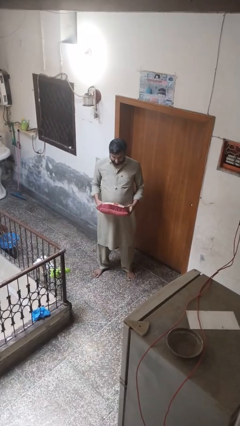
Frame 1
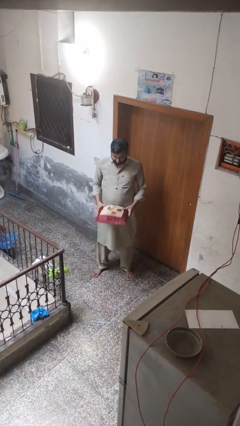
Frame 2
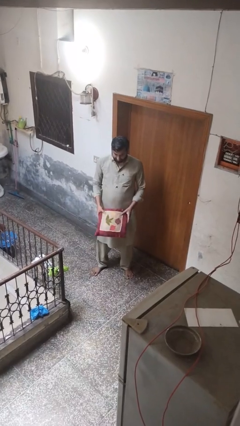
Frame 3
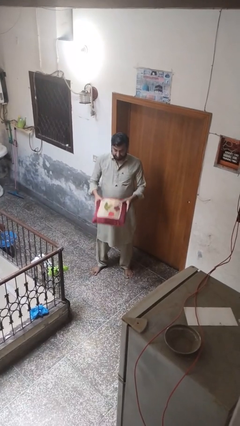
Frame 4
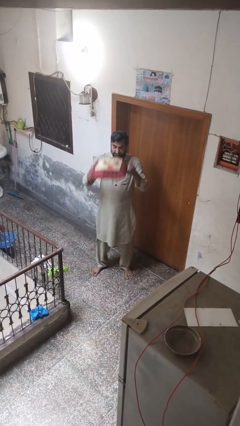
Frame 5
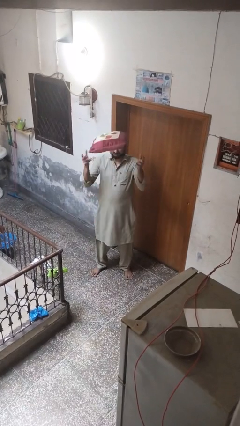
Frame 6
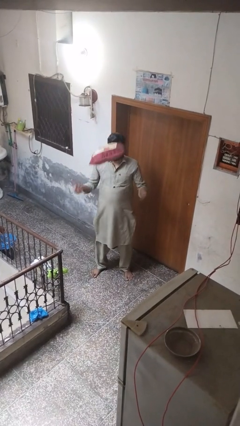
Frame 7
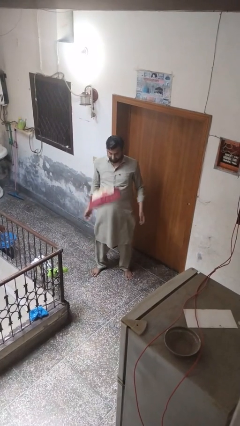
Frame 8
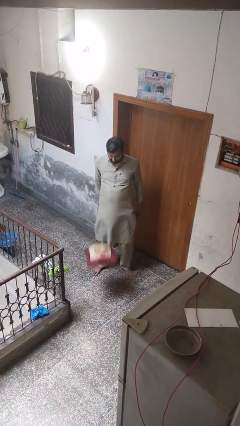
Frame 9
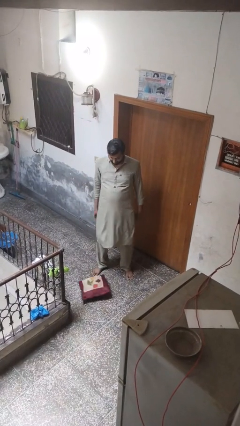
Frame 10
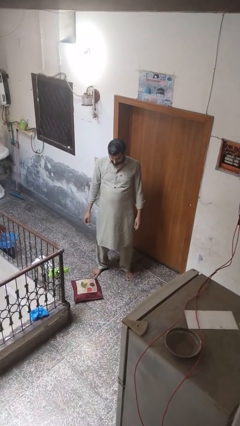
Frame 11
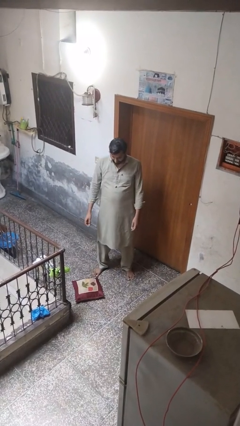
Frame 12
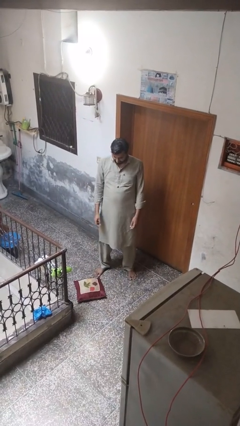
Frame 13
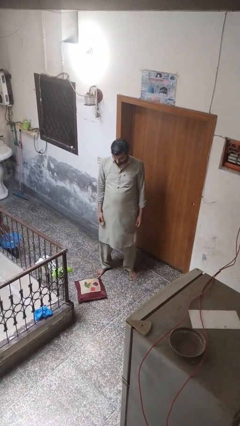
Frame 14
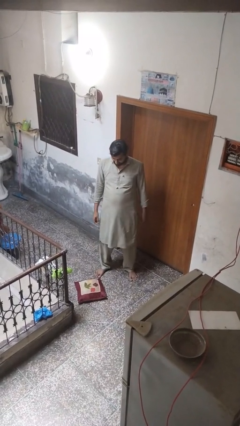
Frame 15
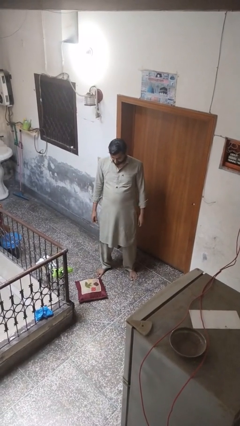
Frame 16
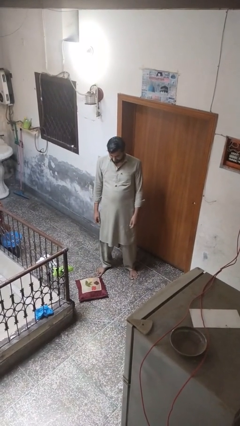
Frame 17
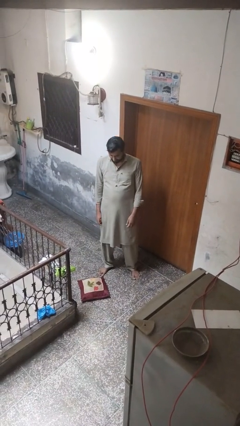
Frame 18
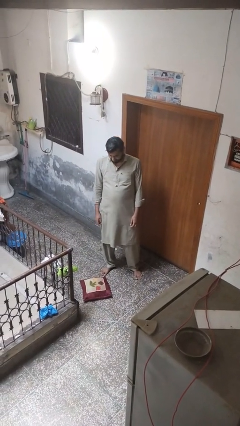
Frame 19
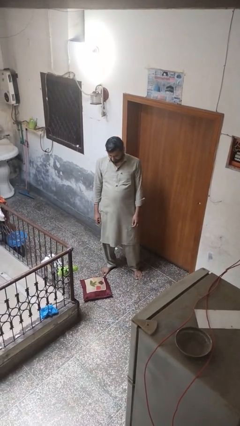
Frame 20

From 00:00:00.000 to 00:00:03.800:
person throws object into air

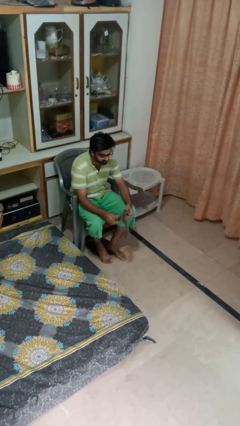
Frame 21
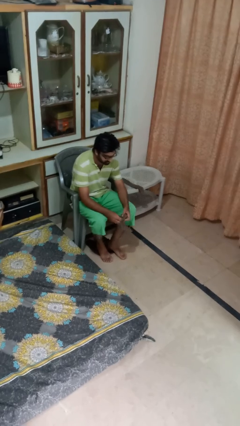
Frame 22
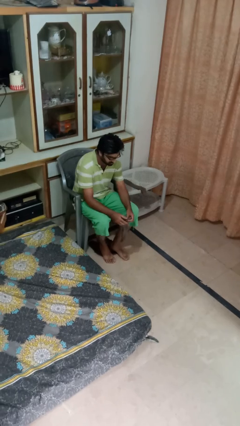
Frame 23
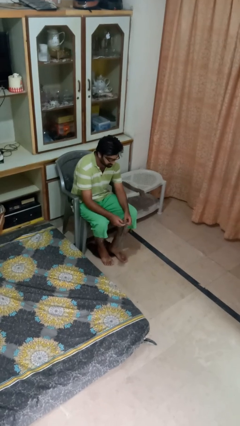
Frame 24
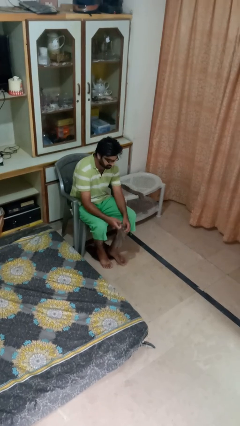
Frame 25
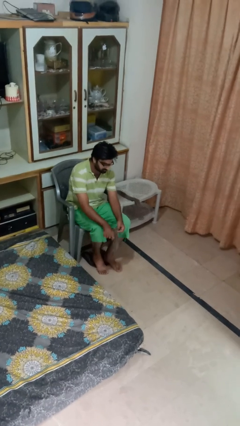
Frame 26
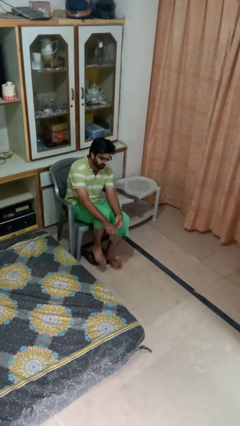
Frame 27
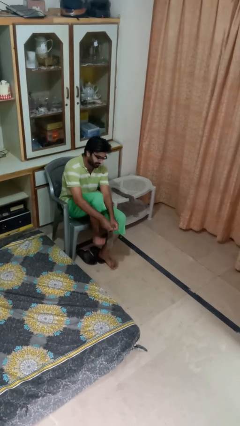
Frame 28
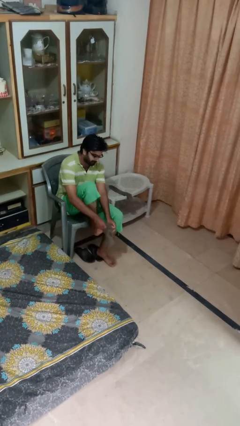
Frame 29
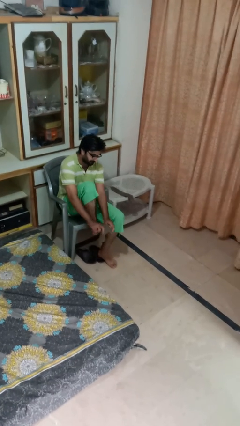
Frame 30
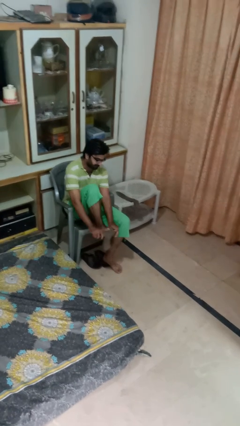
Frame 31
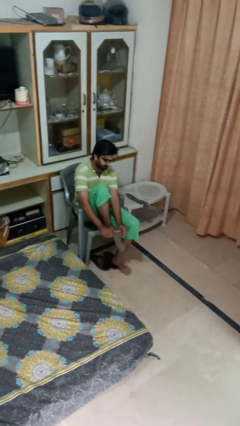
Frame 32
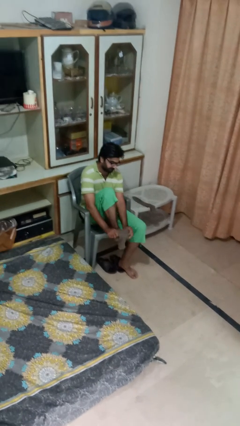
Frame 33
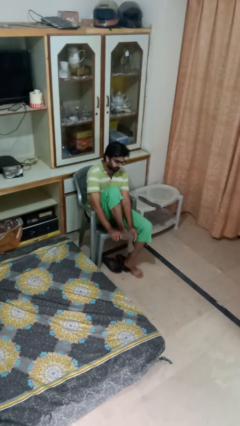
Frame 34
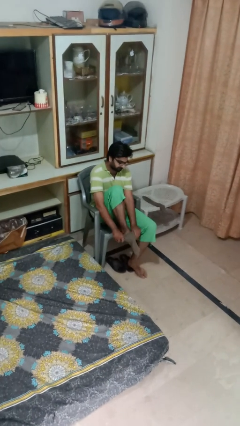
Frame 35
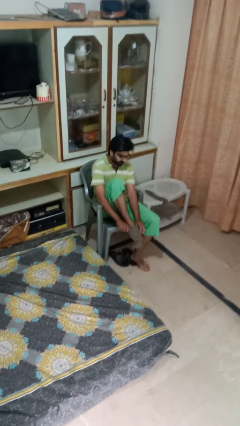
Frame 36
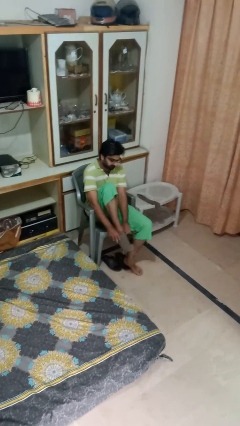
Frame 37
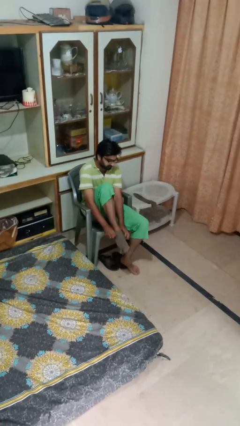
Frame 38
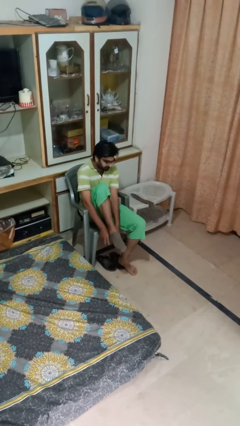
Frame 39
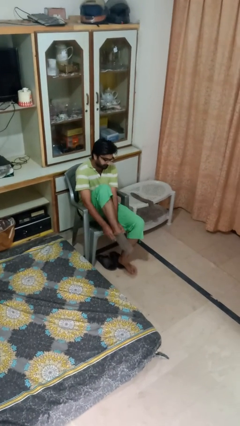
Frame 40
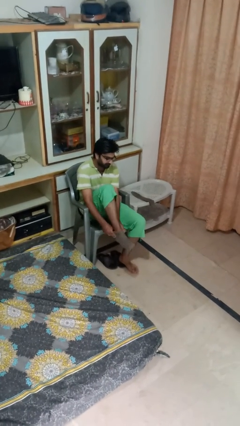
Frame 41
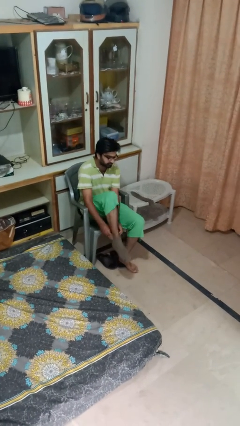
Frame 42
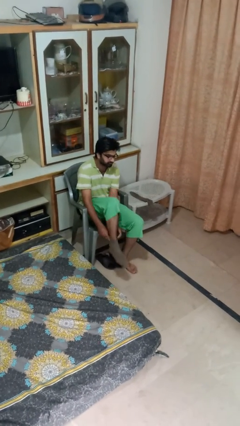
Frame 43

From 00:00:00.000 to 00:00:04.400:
person puts on socks

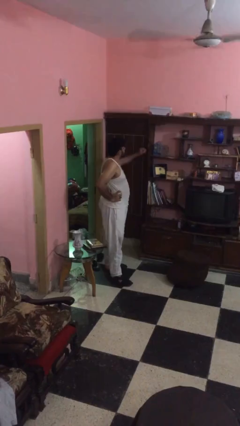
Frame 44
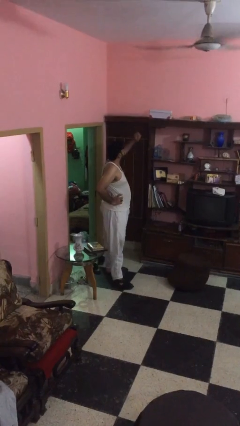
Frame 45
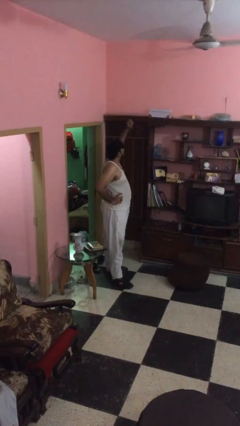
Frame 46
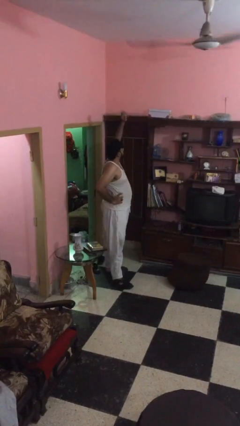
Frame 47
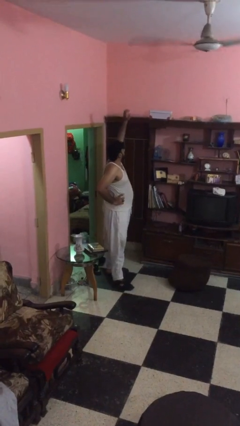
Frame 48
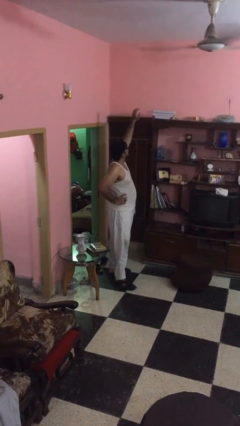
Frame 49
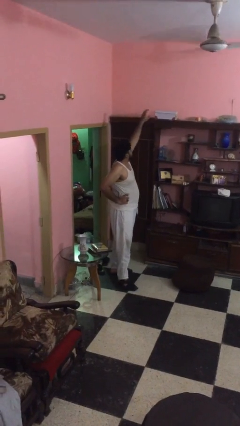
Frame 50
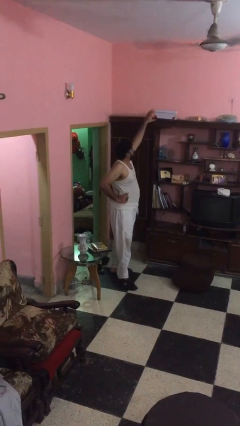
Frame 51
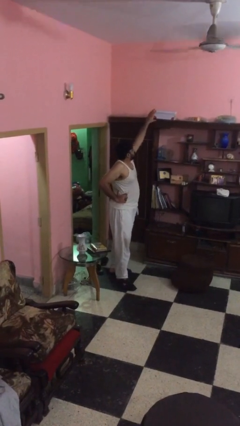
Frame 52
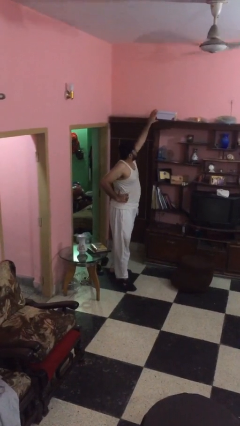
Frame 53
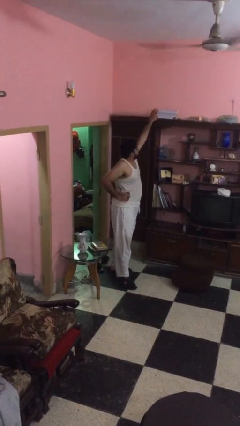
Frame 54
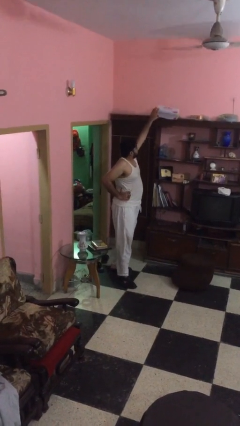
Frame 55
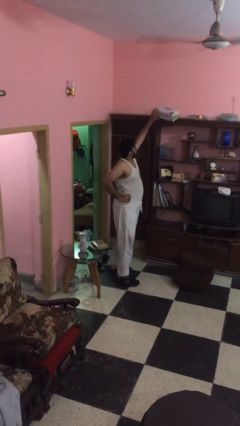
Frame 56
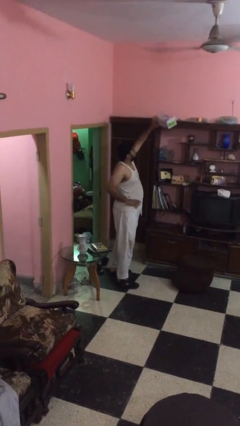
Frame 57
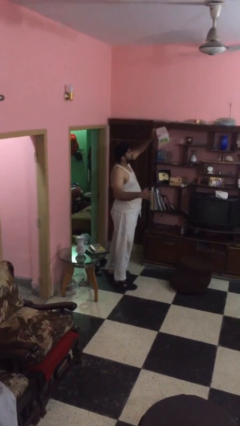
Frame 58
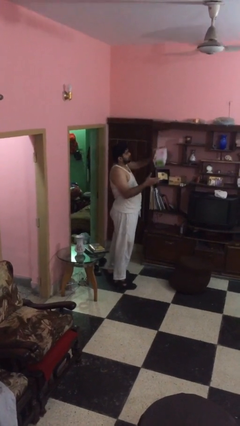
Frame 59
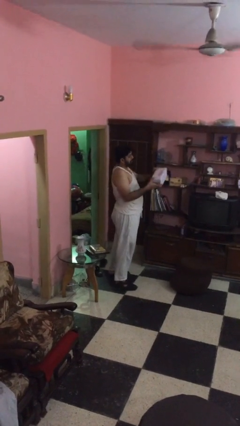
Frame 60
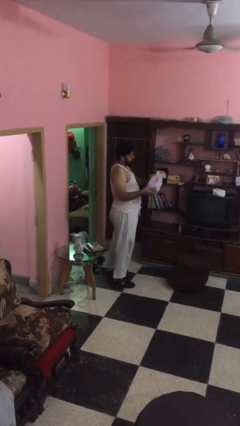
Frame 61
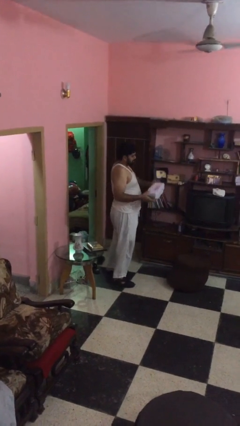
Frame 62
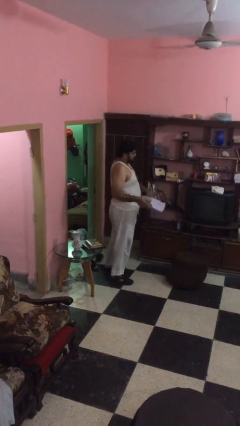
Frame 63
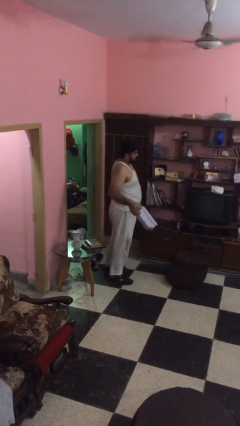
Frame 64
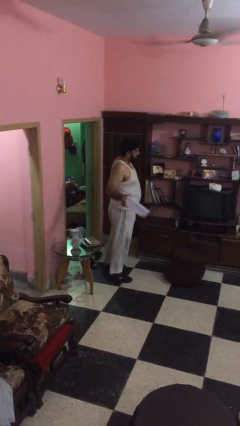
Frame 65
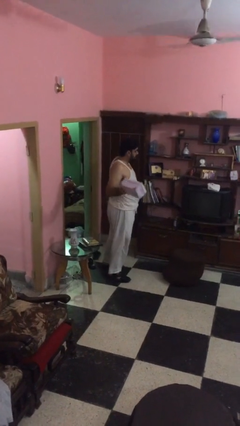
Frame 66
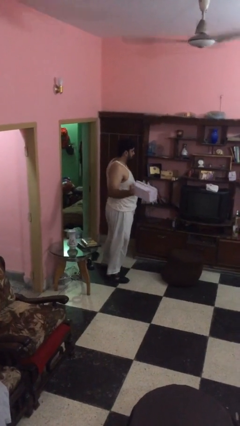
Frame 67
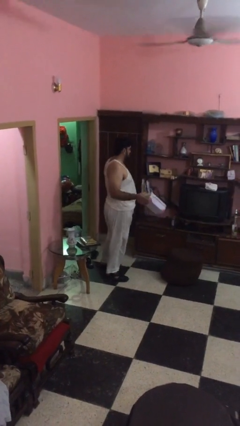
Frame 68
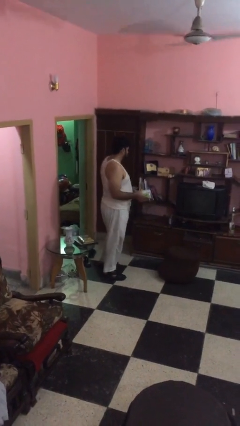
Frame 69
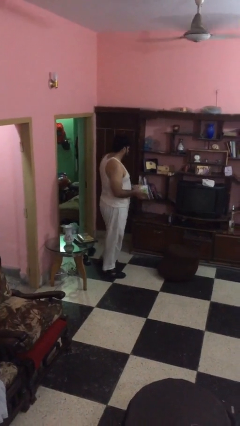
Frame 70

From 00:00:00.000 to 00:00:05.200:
person picks up object from shelf

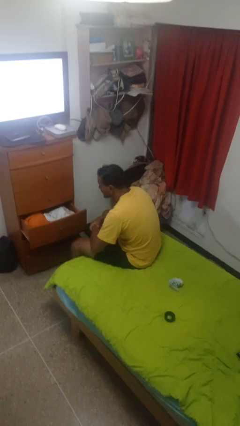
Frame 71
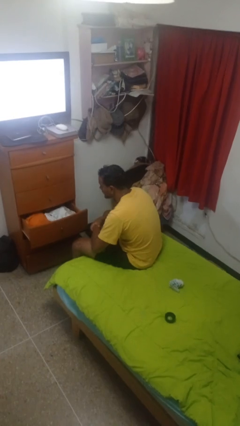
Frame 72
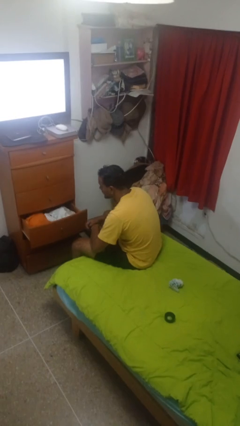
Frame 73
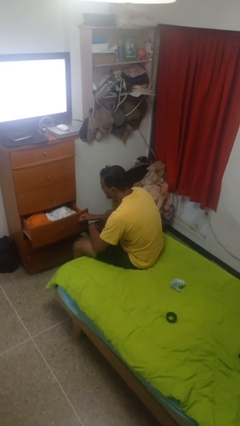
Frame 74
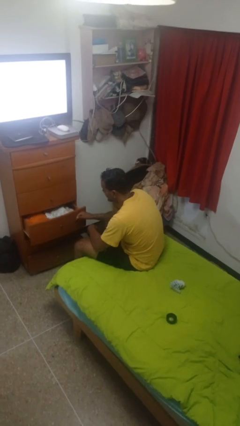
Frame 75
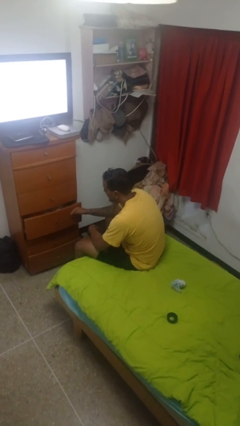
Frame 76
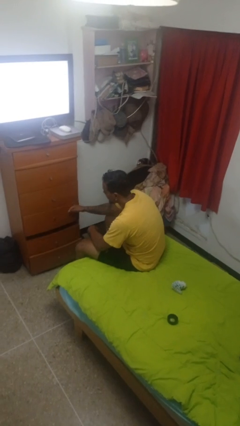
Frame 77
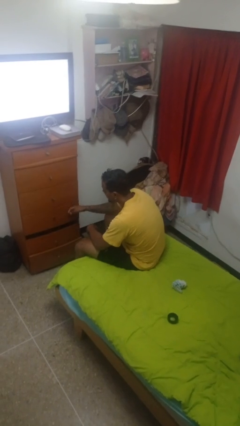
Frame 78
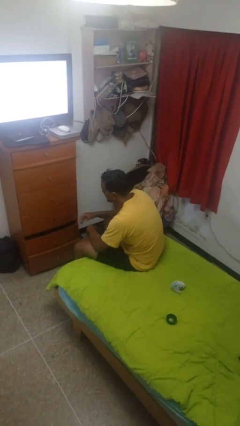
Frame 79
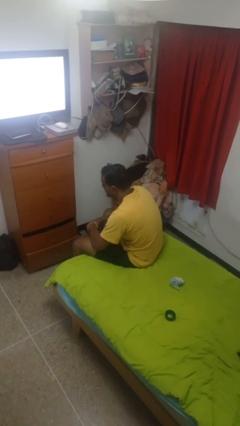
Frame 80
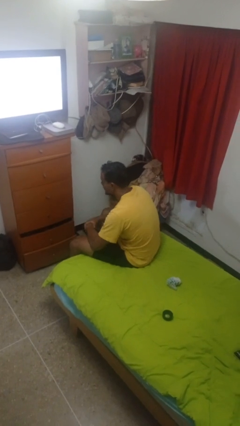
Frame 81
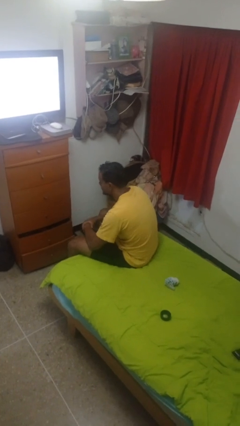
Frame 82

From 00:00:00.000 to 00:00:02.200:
person closes dresser drawer

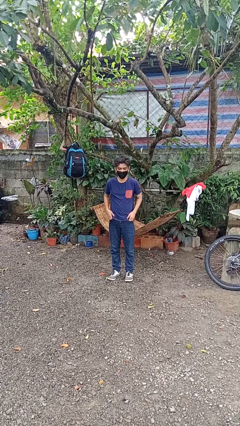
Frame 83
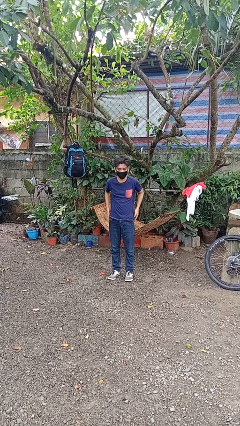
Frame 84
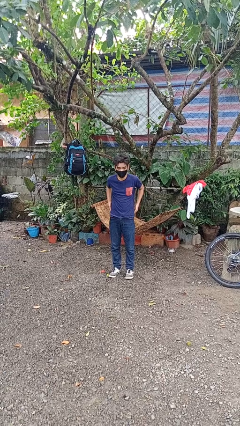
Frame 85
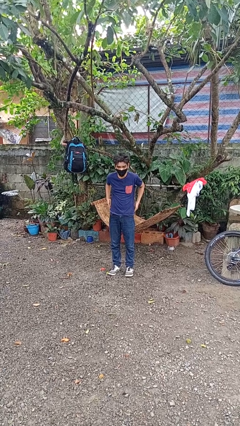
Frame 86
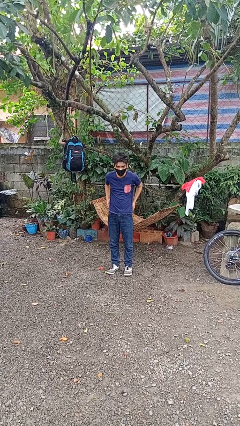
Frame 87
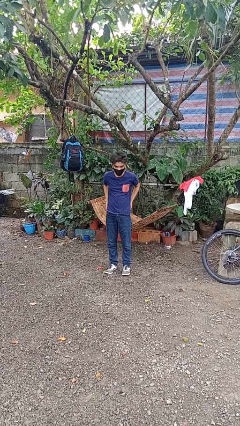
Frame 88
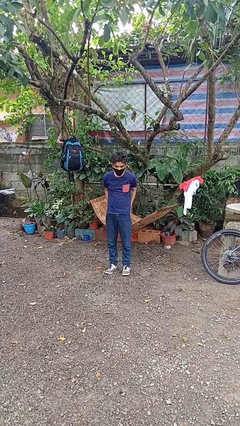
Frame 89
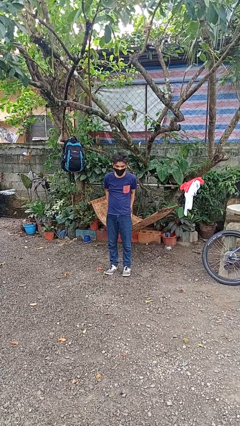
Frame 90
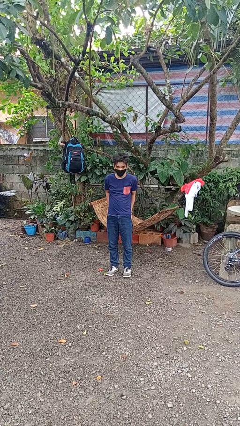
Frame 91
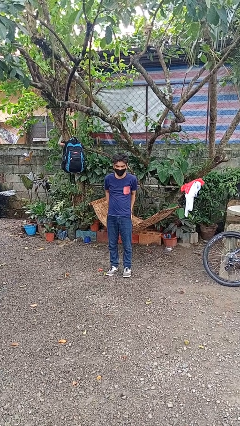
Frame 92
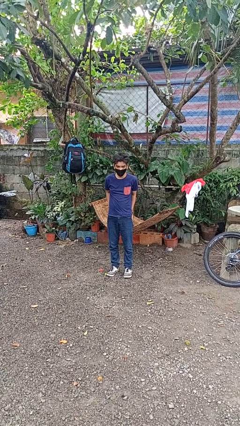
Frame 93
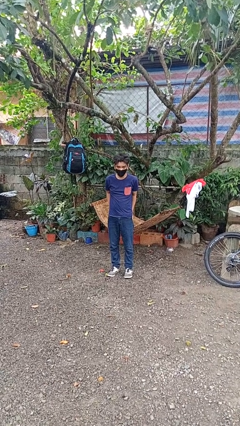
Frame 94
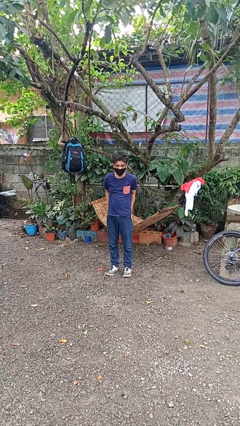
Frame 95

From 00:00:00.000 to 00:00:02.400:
person puts hands in back pockets
